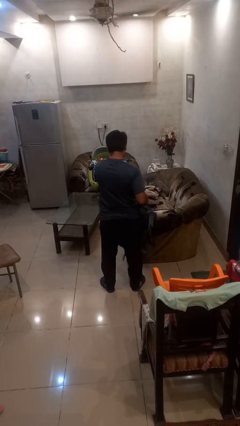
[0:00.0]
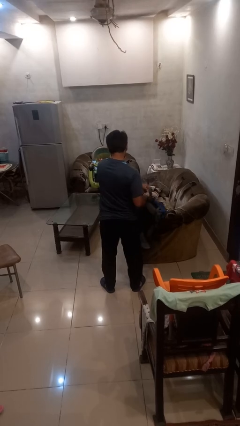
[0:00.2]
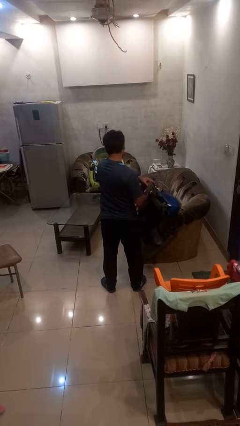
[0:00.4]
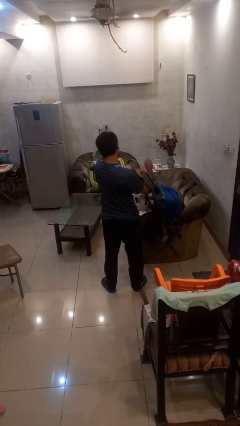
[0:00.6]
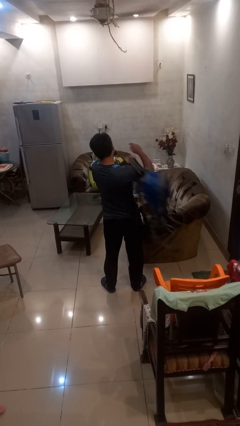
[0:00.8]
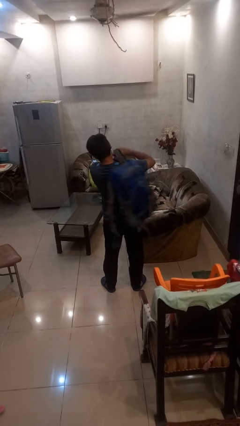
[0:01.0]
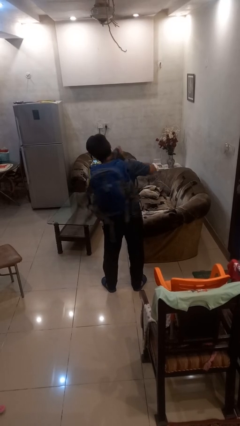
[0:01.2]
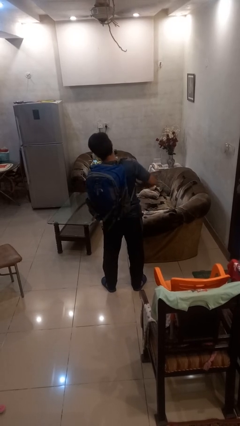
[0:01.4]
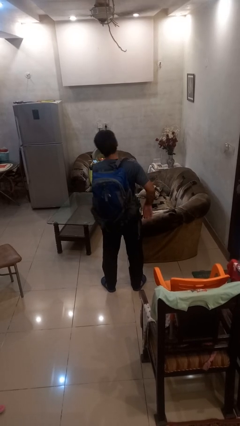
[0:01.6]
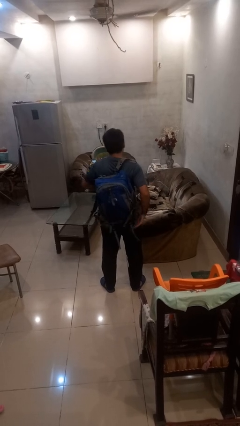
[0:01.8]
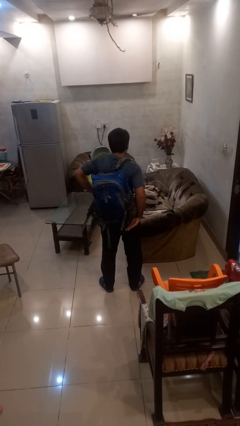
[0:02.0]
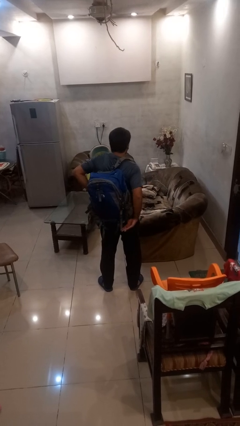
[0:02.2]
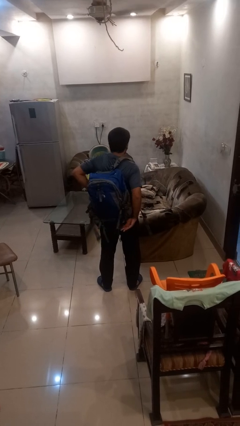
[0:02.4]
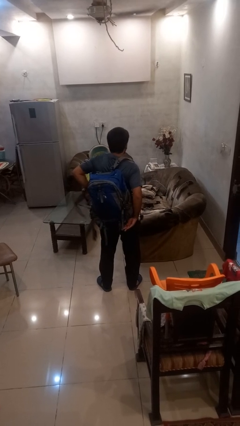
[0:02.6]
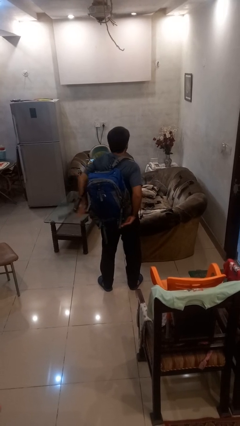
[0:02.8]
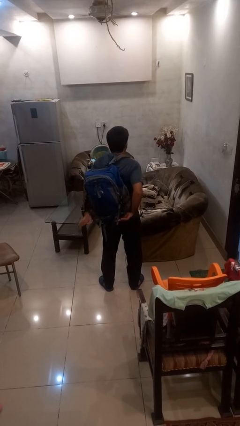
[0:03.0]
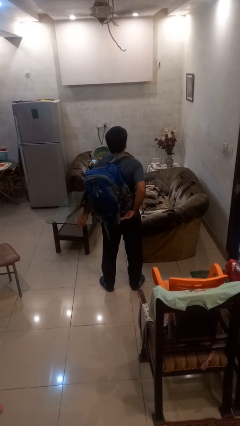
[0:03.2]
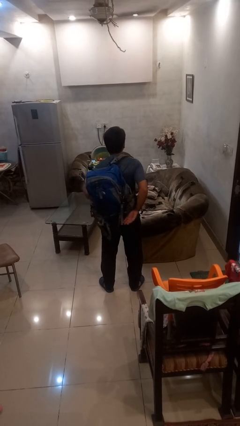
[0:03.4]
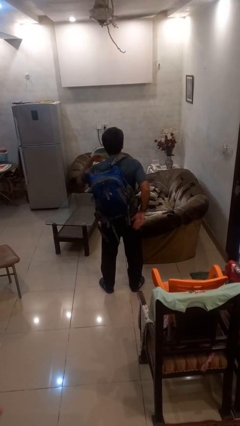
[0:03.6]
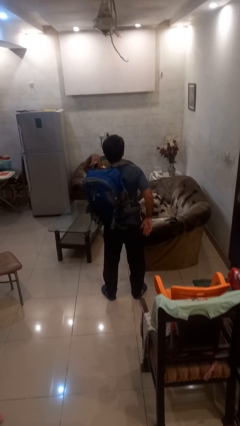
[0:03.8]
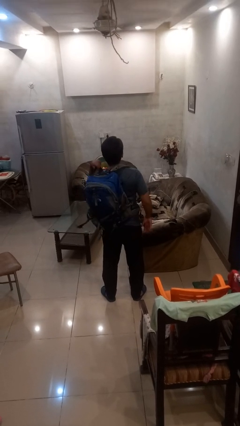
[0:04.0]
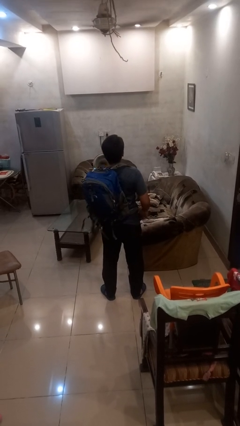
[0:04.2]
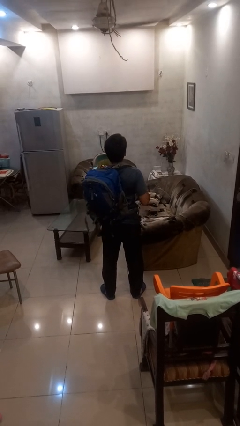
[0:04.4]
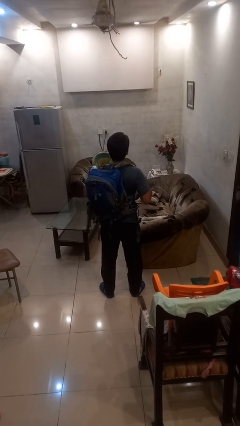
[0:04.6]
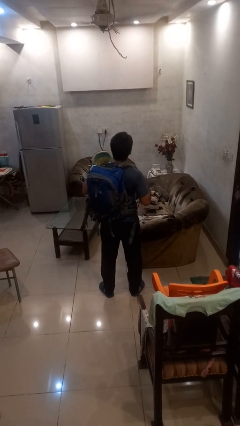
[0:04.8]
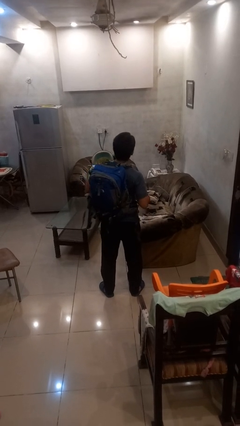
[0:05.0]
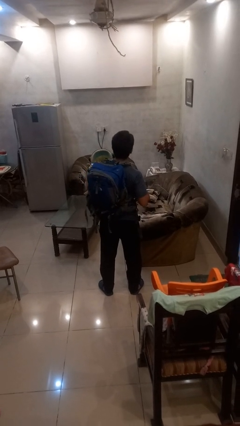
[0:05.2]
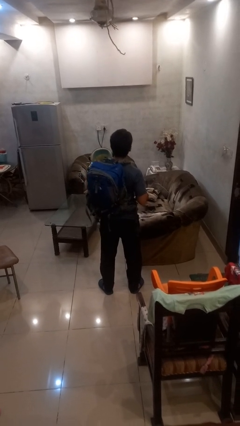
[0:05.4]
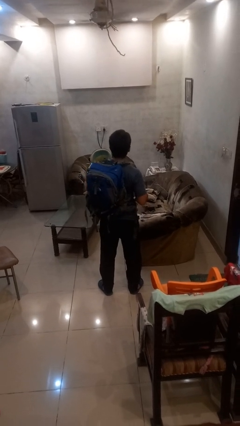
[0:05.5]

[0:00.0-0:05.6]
person puts on backpack

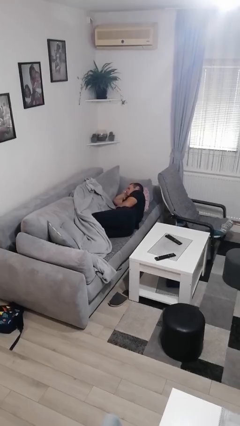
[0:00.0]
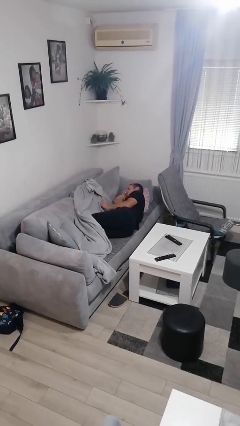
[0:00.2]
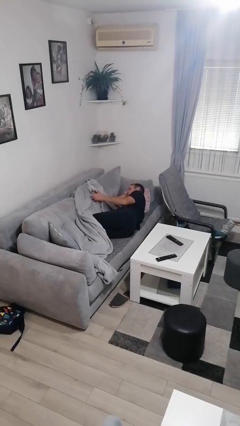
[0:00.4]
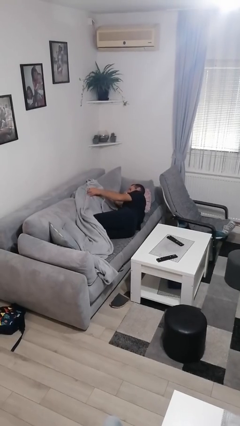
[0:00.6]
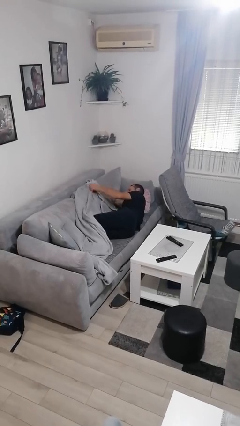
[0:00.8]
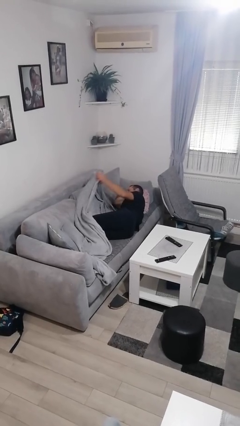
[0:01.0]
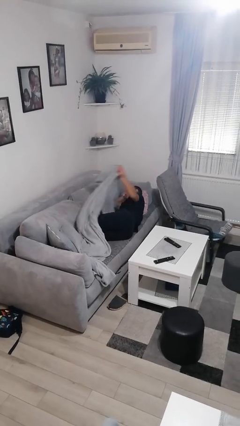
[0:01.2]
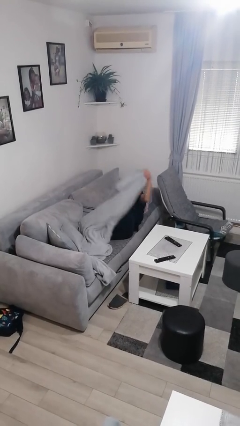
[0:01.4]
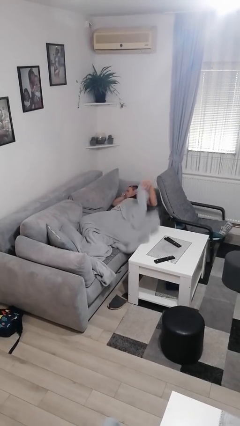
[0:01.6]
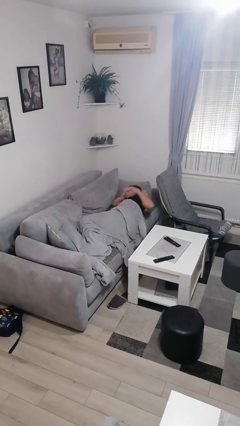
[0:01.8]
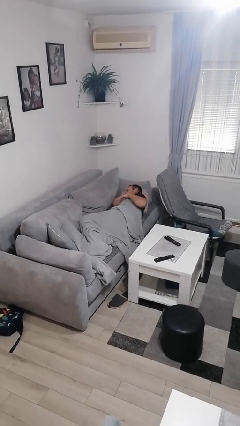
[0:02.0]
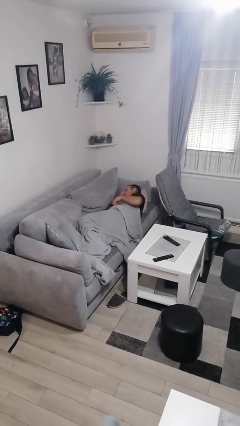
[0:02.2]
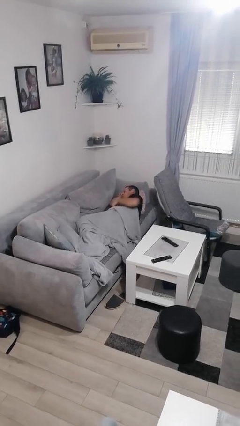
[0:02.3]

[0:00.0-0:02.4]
person covers with blanket

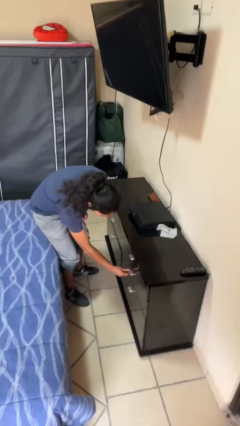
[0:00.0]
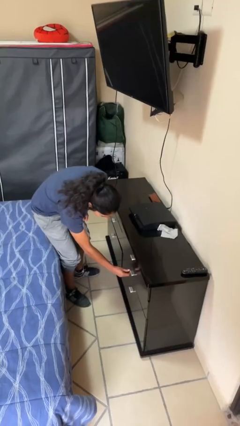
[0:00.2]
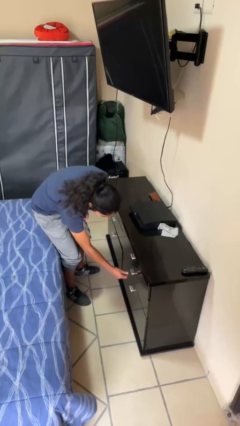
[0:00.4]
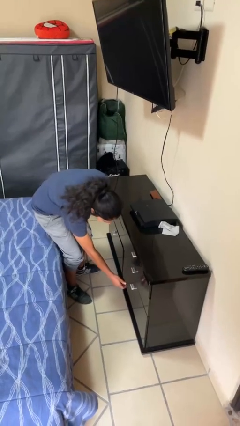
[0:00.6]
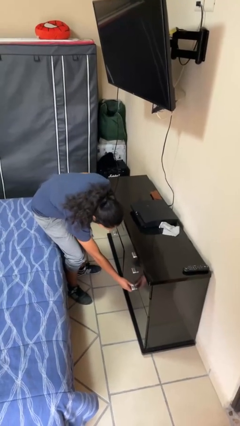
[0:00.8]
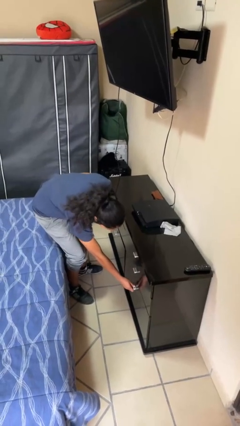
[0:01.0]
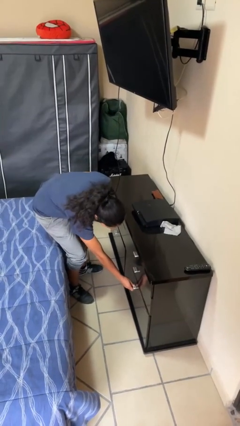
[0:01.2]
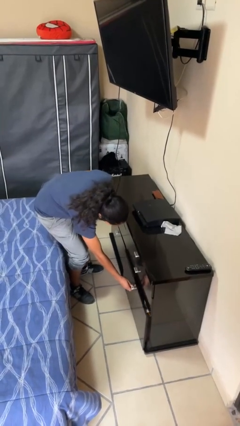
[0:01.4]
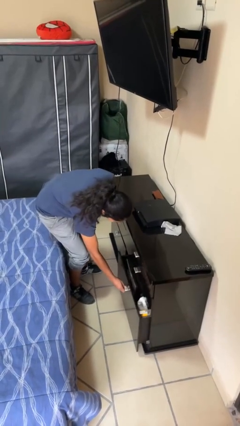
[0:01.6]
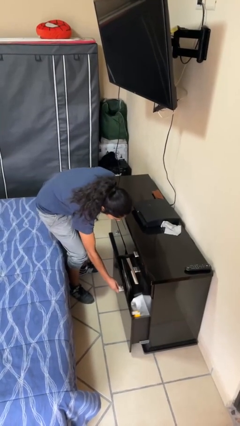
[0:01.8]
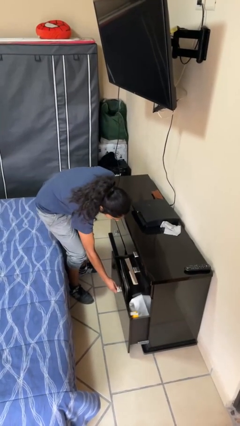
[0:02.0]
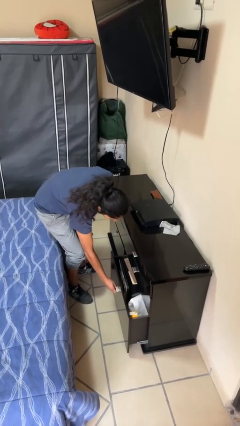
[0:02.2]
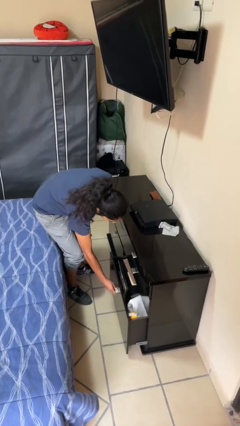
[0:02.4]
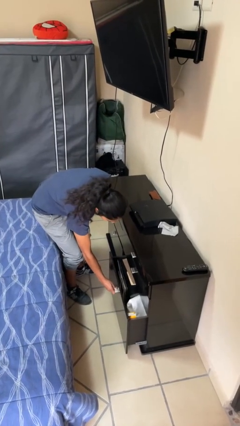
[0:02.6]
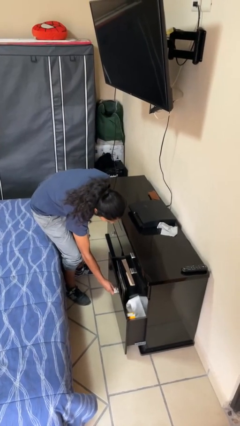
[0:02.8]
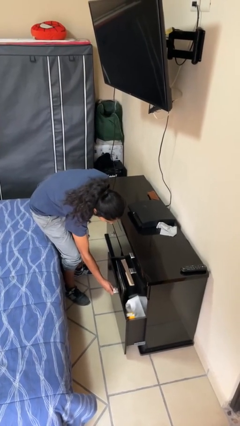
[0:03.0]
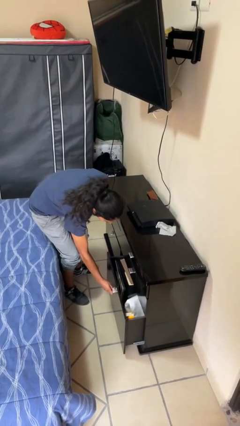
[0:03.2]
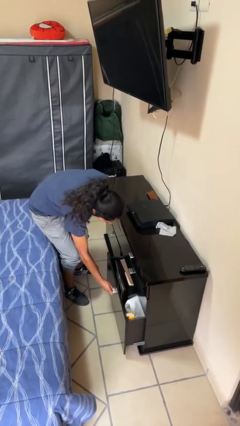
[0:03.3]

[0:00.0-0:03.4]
person opens dresser drawer

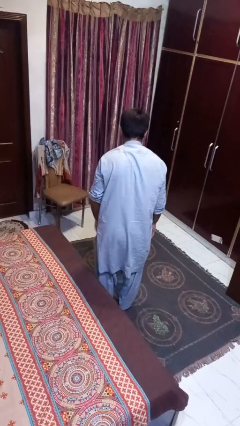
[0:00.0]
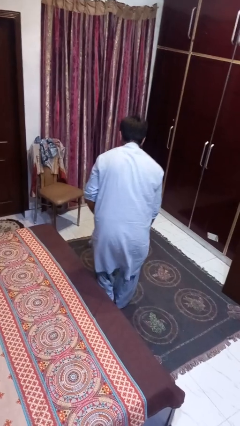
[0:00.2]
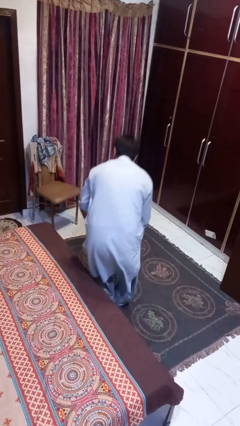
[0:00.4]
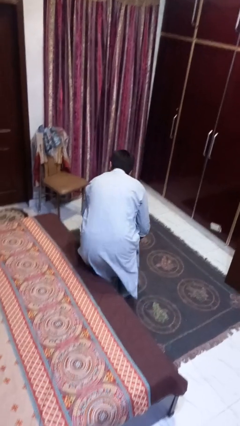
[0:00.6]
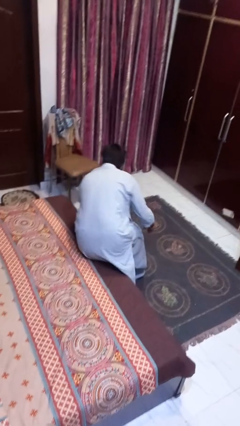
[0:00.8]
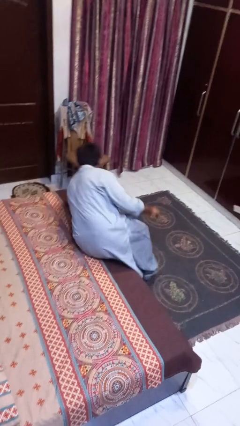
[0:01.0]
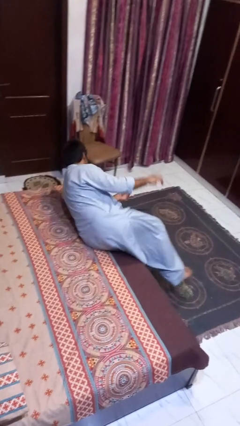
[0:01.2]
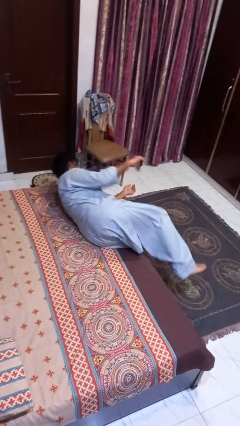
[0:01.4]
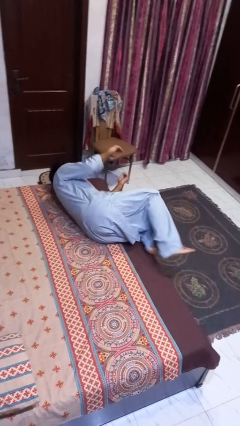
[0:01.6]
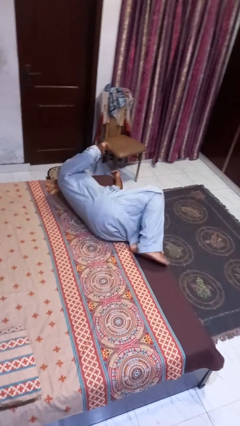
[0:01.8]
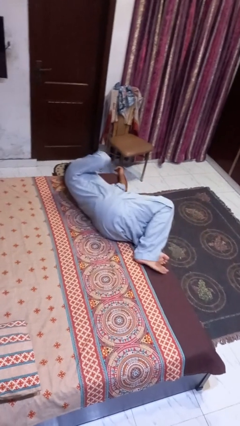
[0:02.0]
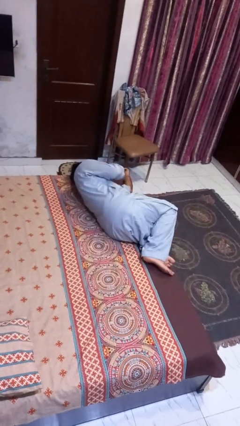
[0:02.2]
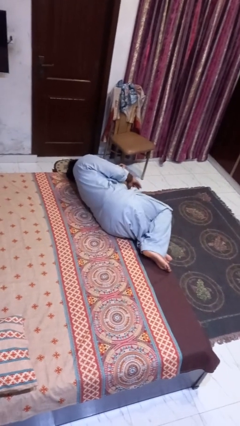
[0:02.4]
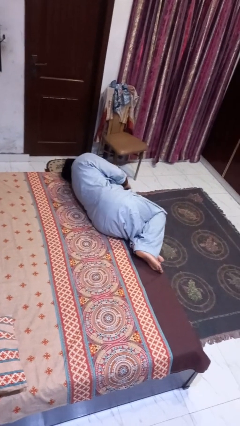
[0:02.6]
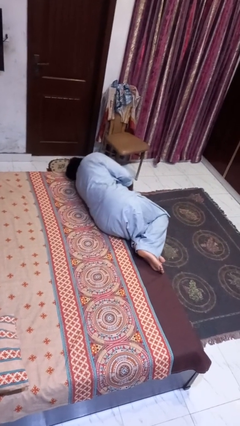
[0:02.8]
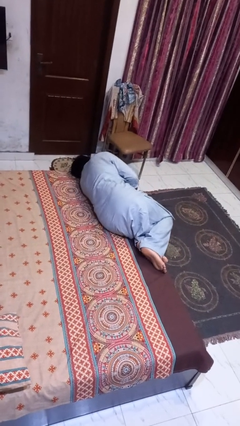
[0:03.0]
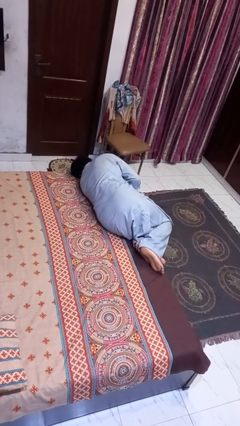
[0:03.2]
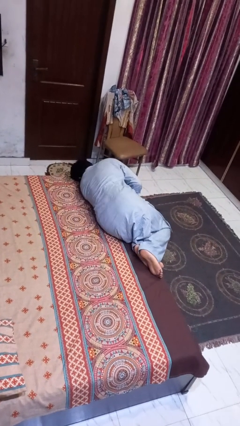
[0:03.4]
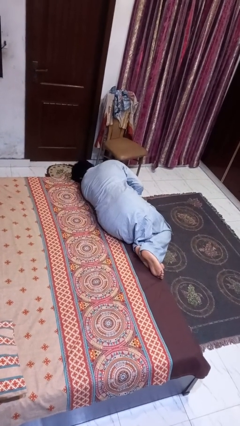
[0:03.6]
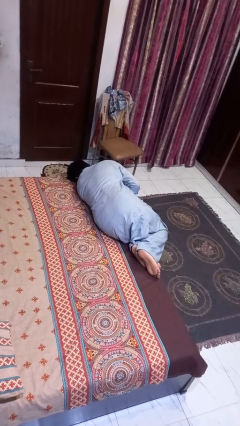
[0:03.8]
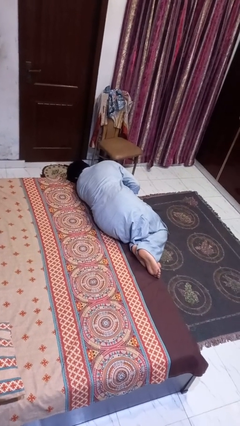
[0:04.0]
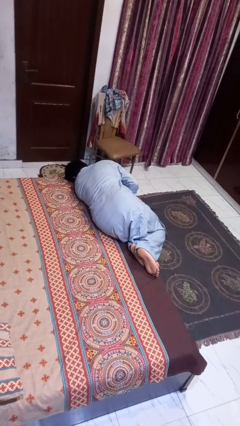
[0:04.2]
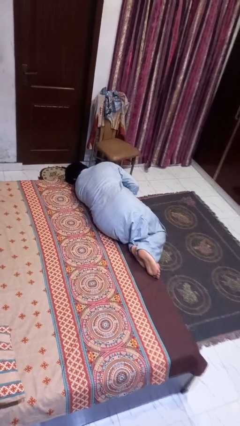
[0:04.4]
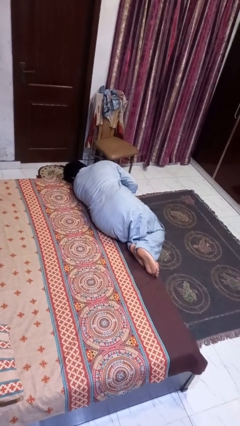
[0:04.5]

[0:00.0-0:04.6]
person lies down on bed

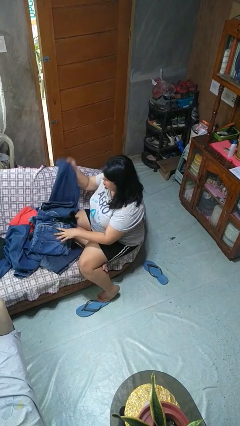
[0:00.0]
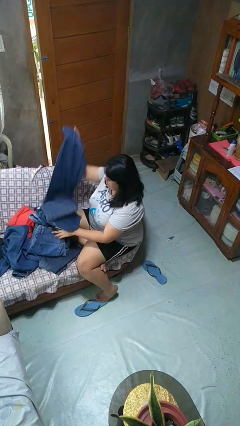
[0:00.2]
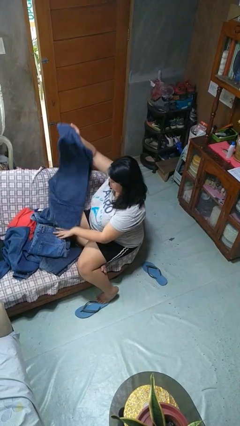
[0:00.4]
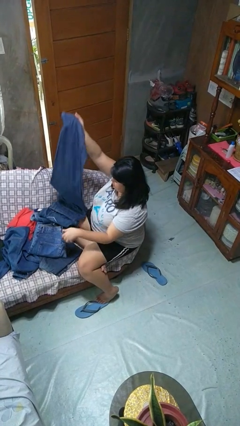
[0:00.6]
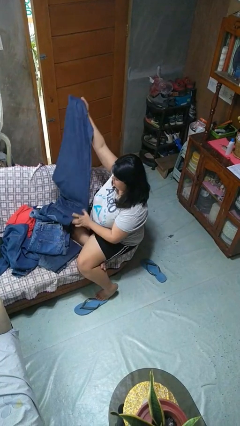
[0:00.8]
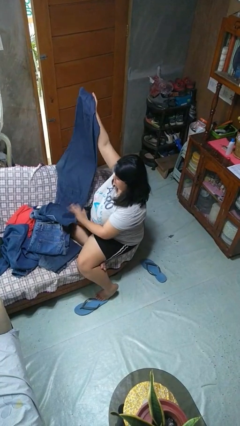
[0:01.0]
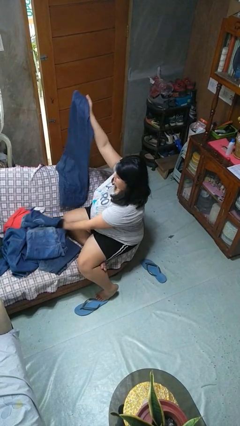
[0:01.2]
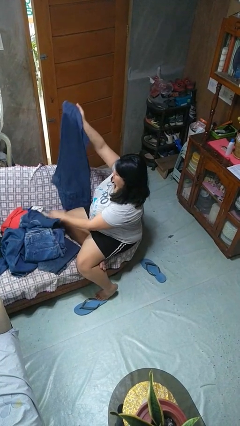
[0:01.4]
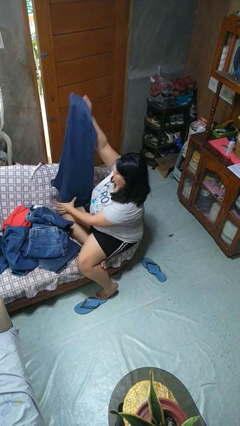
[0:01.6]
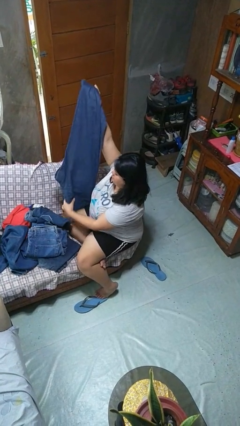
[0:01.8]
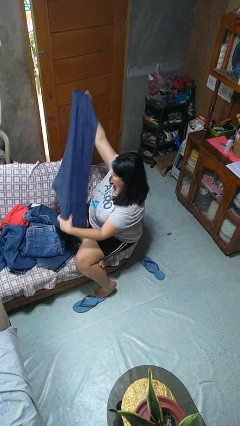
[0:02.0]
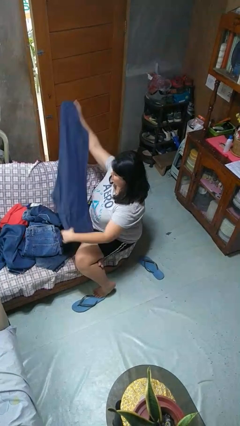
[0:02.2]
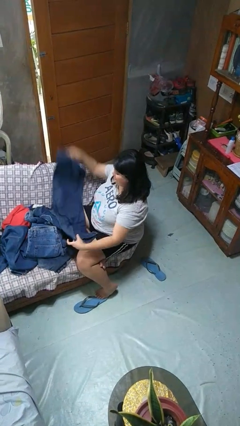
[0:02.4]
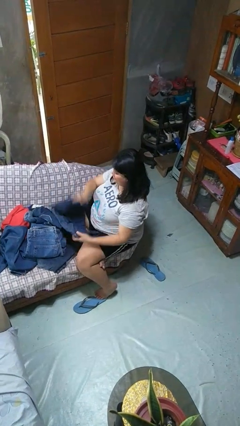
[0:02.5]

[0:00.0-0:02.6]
person folds pants
